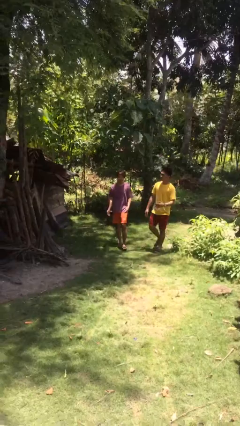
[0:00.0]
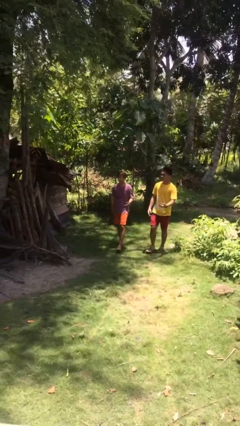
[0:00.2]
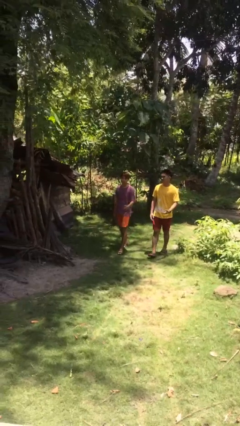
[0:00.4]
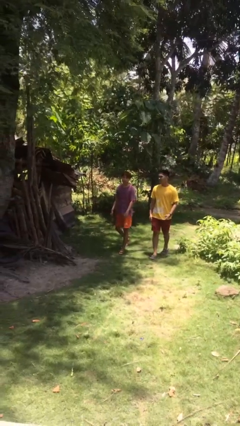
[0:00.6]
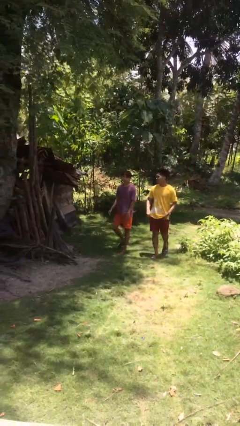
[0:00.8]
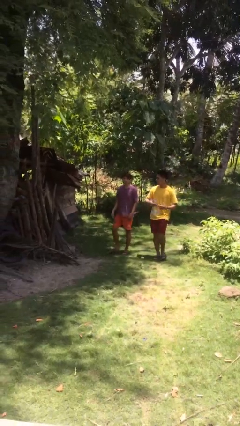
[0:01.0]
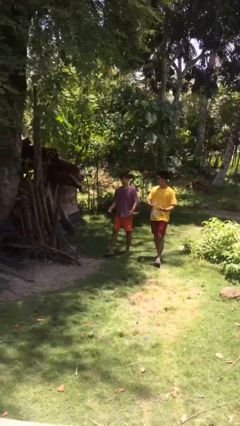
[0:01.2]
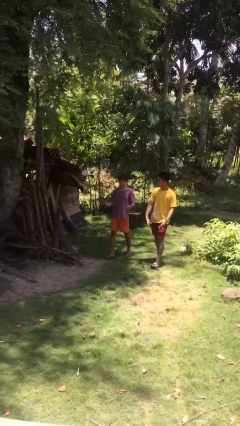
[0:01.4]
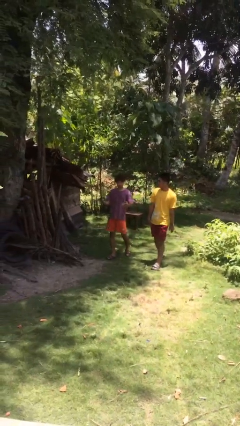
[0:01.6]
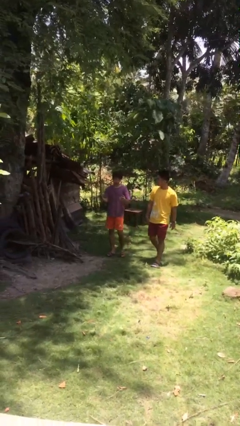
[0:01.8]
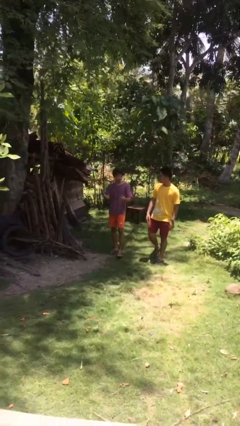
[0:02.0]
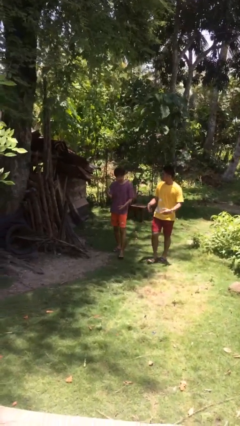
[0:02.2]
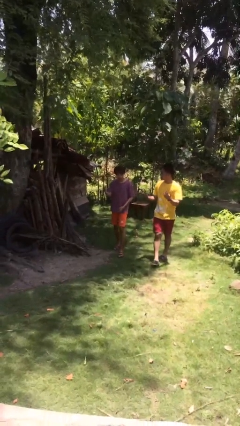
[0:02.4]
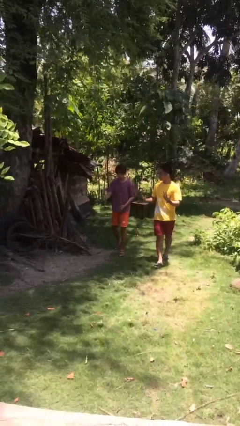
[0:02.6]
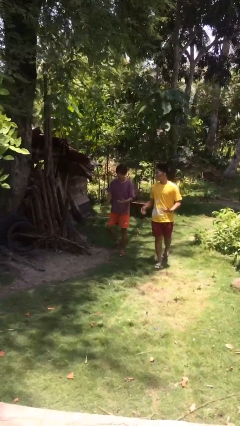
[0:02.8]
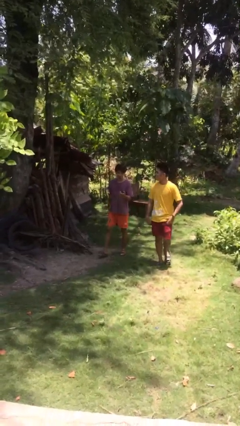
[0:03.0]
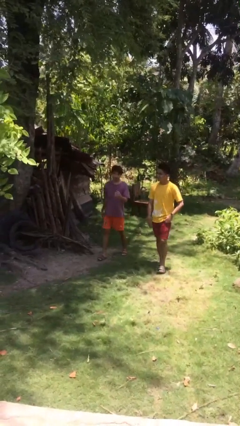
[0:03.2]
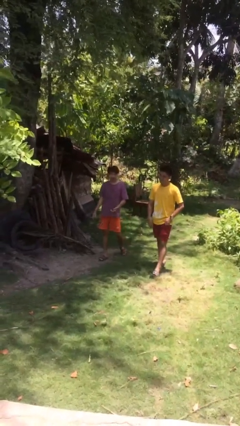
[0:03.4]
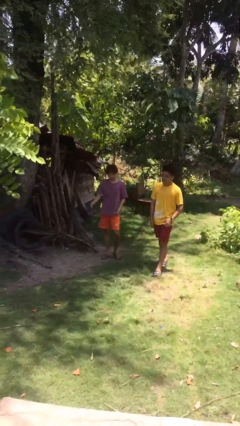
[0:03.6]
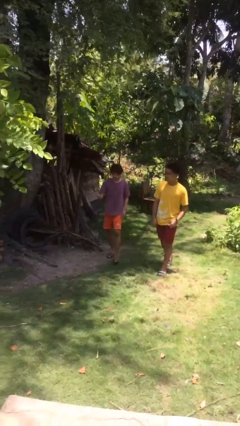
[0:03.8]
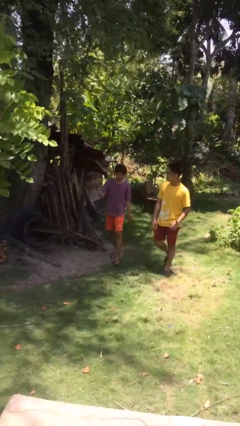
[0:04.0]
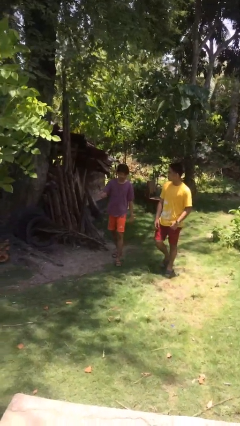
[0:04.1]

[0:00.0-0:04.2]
person talks to person

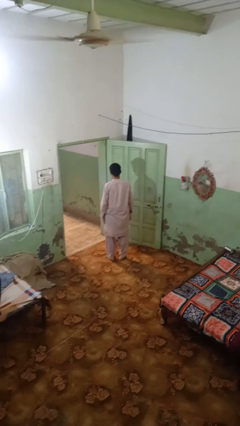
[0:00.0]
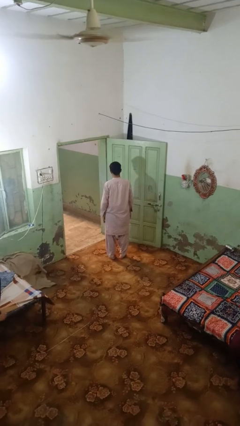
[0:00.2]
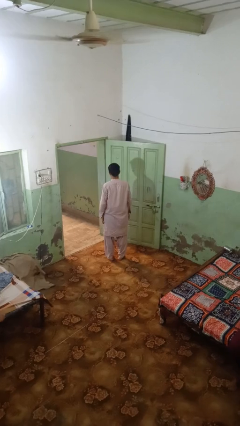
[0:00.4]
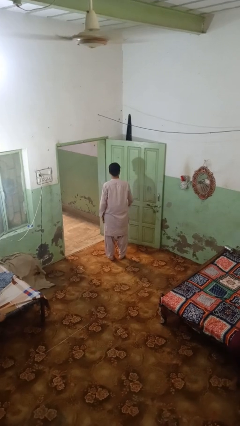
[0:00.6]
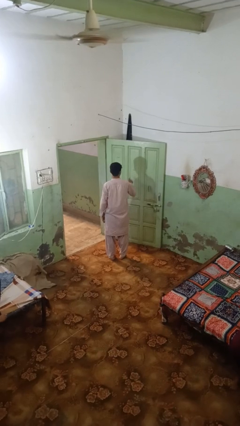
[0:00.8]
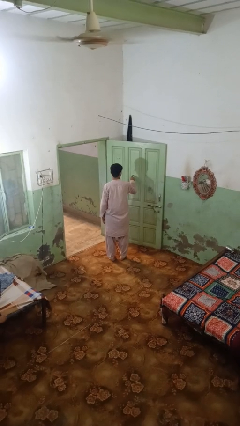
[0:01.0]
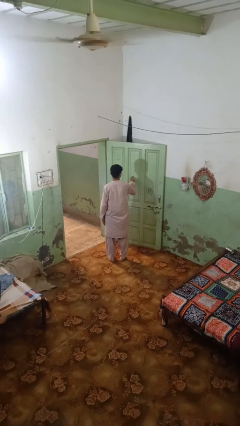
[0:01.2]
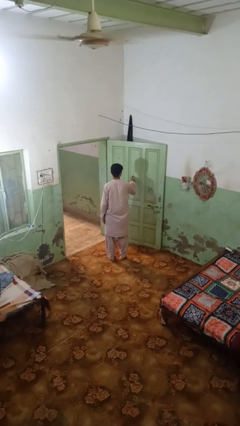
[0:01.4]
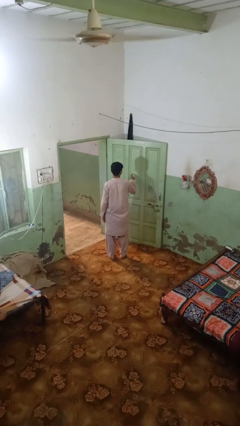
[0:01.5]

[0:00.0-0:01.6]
person taps object with finger

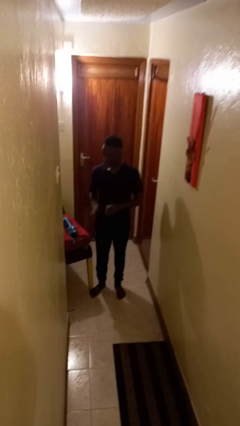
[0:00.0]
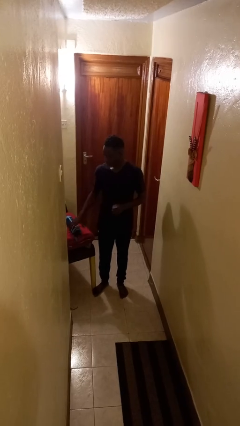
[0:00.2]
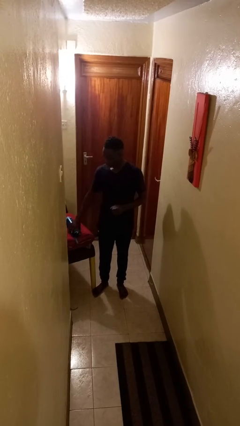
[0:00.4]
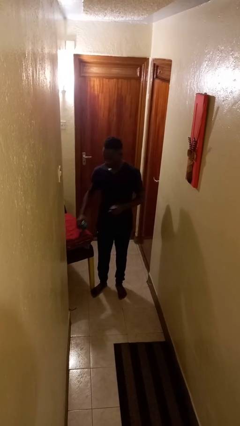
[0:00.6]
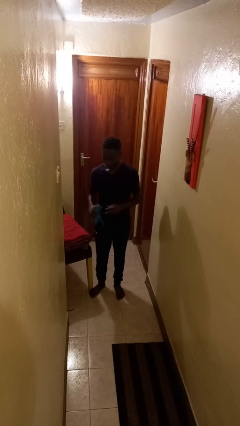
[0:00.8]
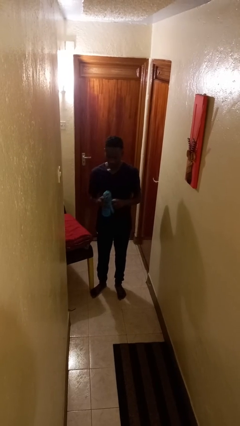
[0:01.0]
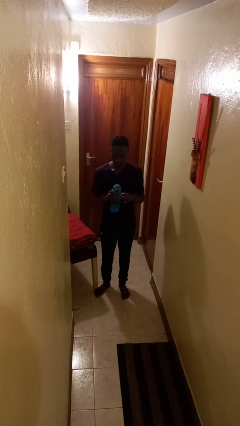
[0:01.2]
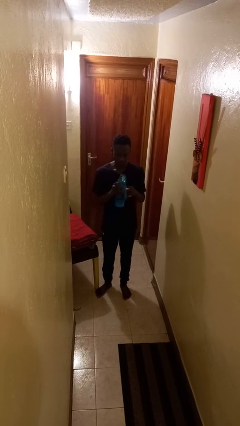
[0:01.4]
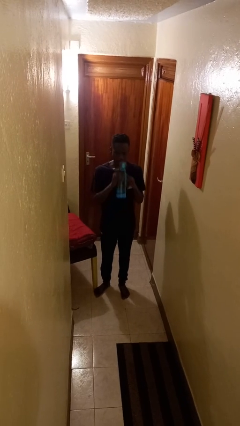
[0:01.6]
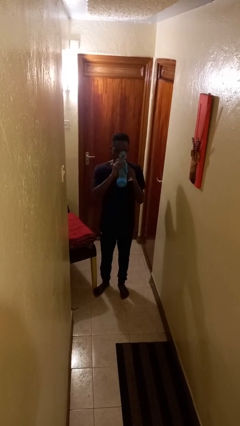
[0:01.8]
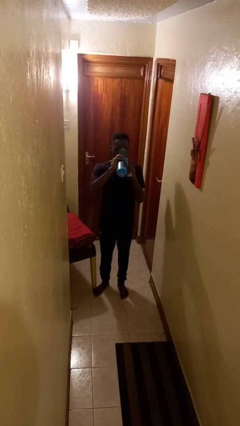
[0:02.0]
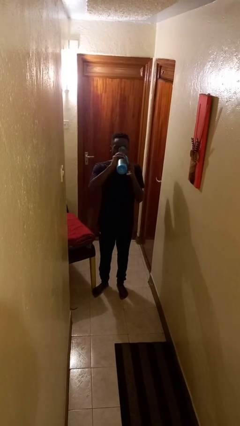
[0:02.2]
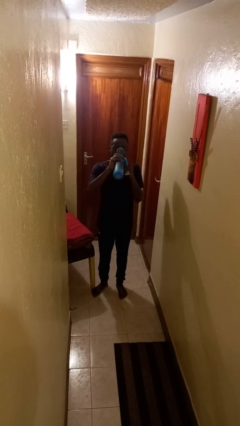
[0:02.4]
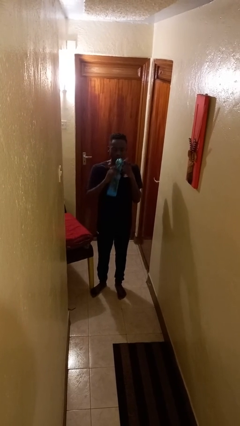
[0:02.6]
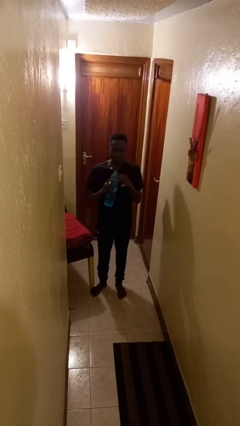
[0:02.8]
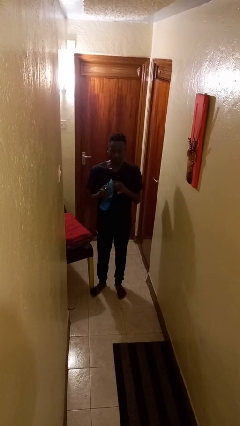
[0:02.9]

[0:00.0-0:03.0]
person drinks from cup

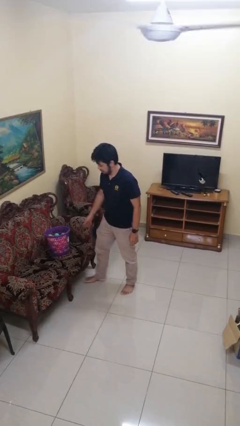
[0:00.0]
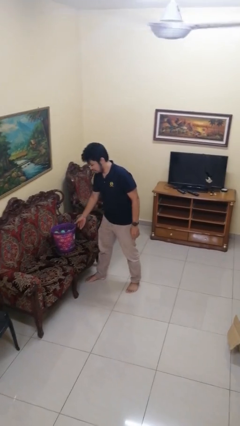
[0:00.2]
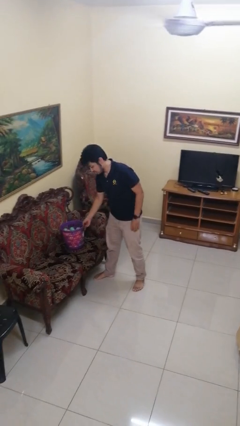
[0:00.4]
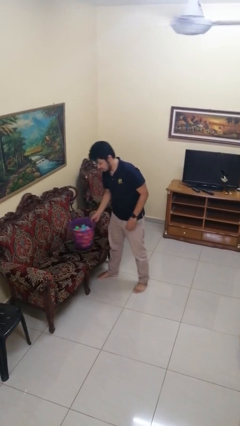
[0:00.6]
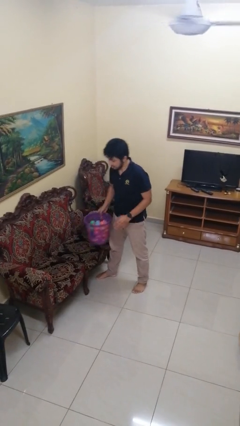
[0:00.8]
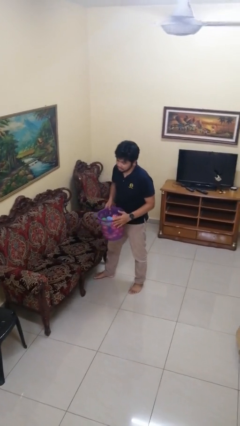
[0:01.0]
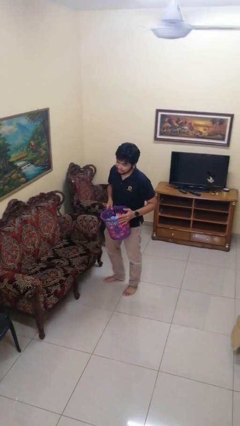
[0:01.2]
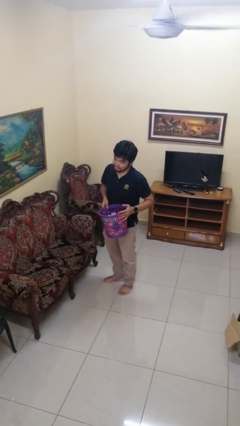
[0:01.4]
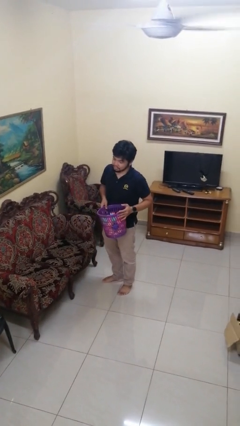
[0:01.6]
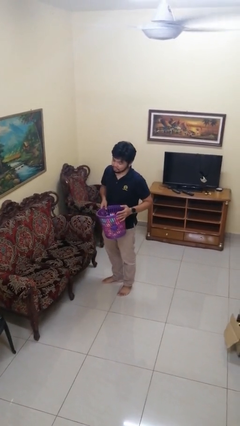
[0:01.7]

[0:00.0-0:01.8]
person picks up object from couch

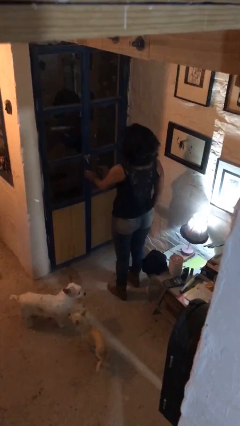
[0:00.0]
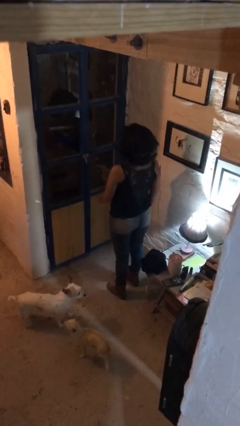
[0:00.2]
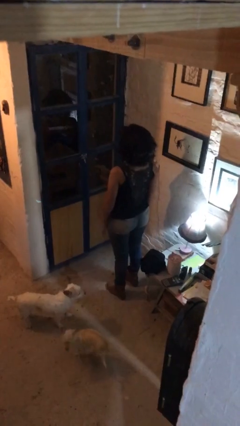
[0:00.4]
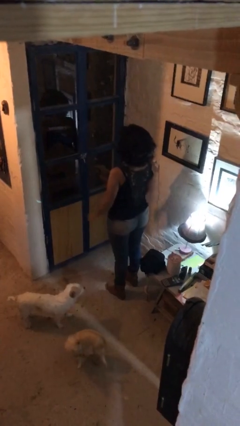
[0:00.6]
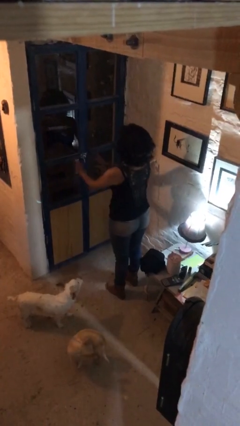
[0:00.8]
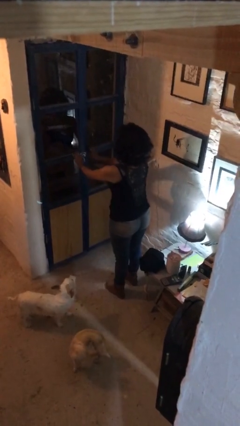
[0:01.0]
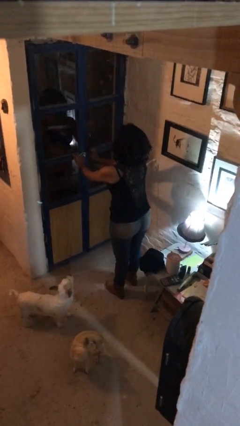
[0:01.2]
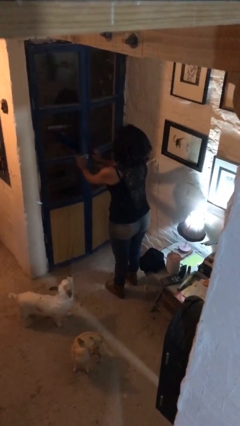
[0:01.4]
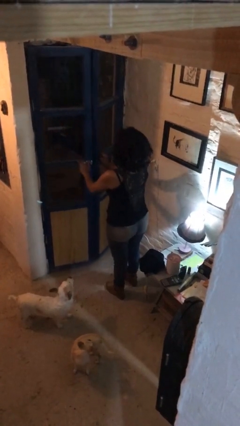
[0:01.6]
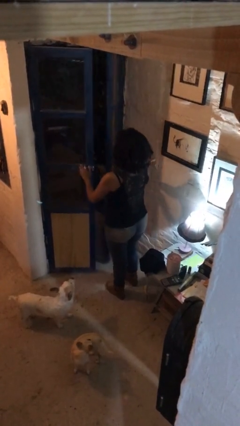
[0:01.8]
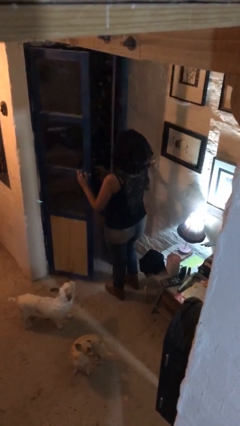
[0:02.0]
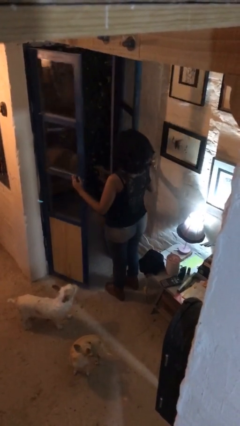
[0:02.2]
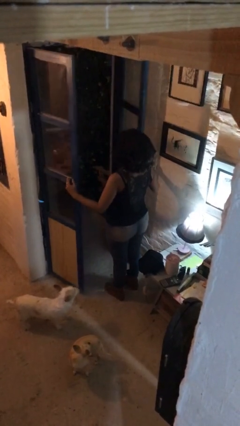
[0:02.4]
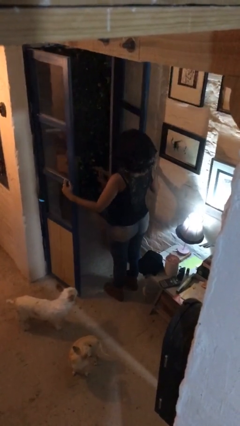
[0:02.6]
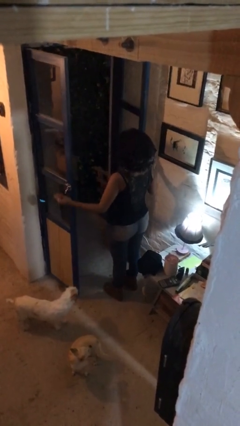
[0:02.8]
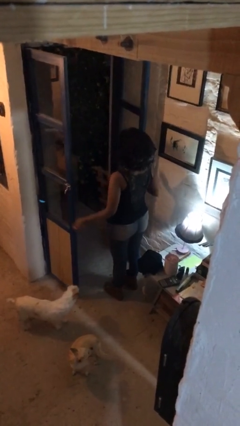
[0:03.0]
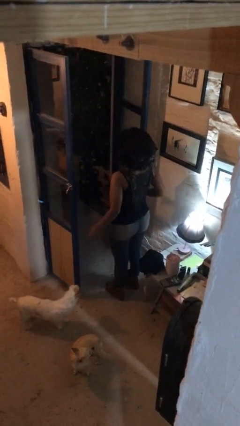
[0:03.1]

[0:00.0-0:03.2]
person opens facility door

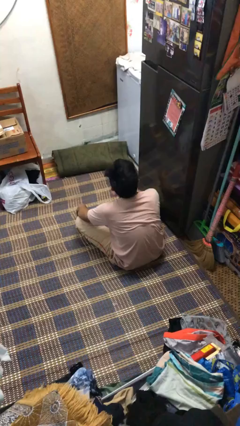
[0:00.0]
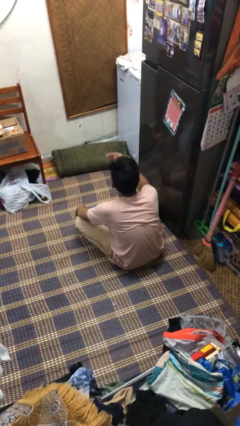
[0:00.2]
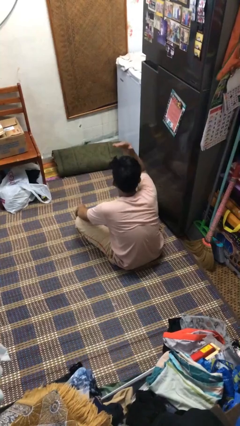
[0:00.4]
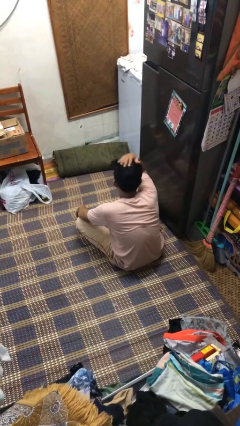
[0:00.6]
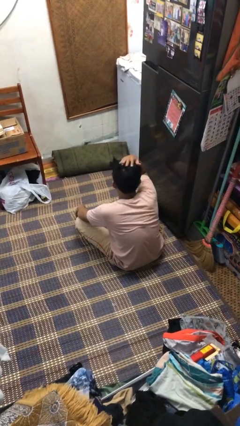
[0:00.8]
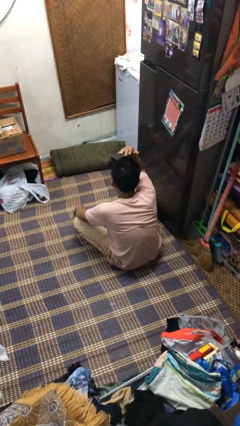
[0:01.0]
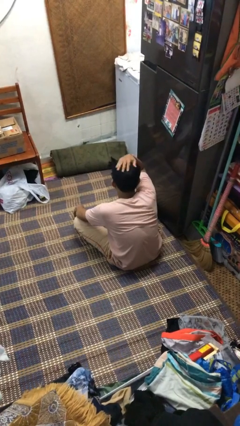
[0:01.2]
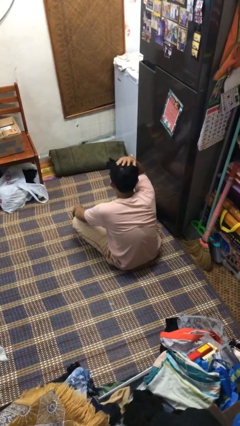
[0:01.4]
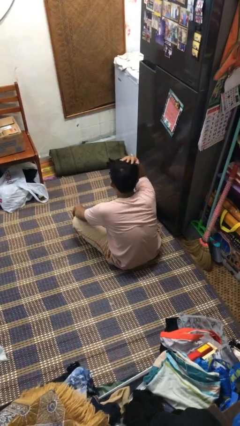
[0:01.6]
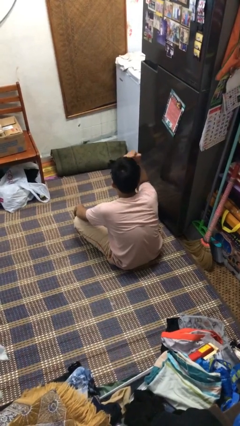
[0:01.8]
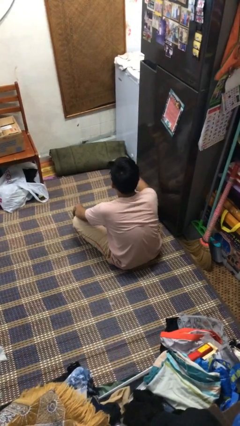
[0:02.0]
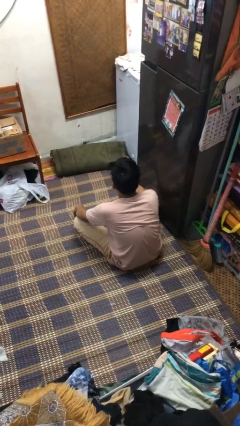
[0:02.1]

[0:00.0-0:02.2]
person pats head

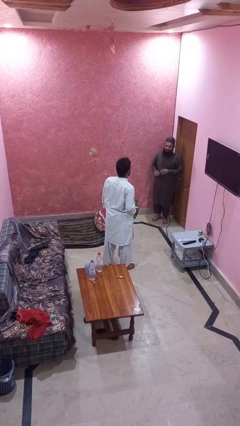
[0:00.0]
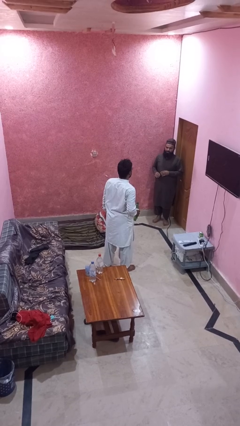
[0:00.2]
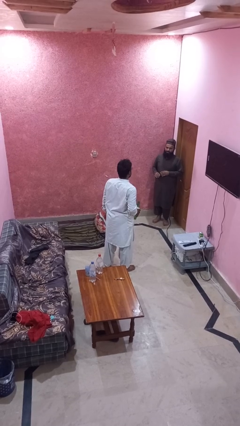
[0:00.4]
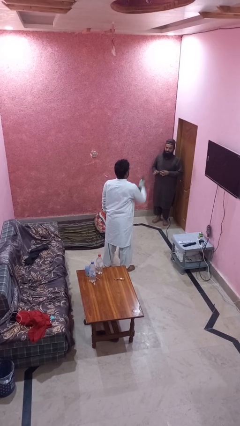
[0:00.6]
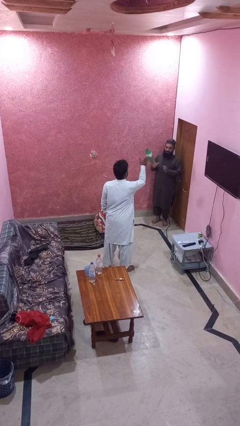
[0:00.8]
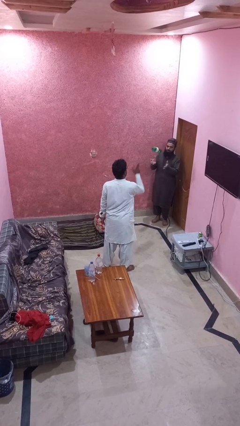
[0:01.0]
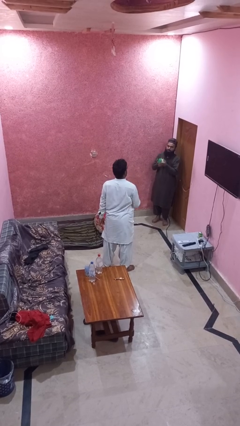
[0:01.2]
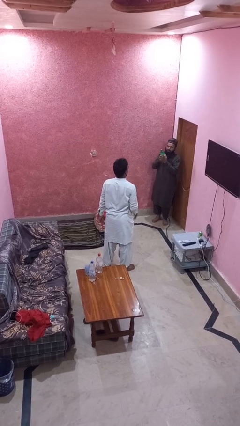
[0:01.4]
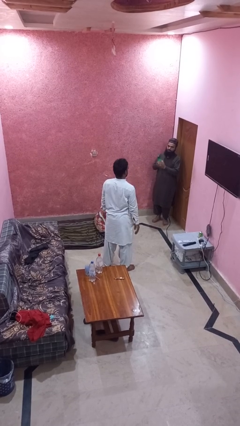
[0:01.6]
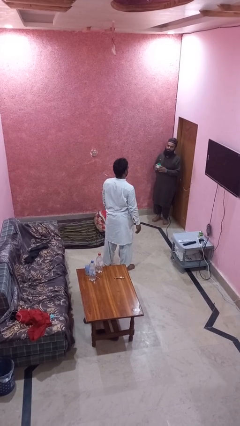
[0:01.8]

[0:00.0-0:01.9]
person throws object to person
